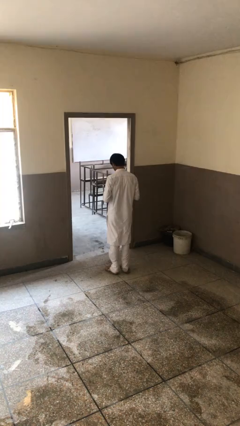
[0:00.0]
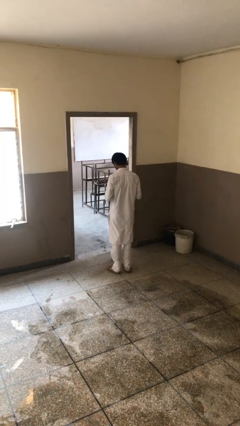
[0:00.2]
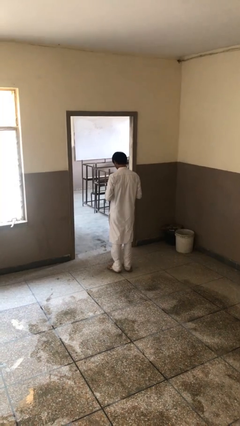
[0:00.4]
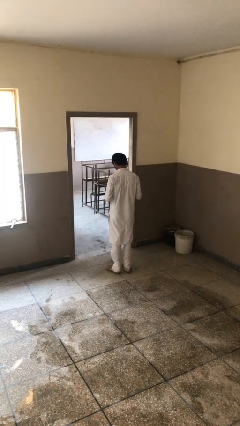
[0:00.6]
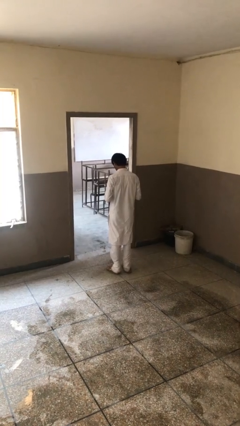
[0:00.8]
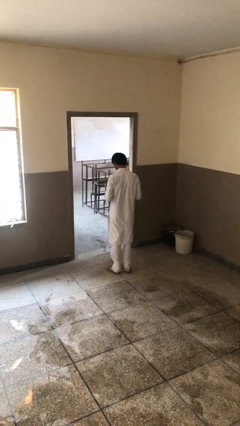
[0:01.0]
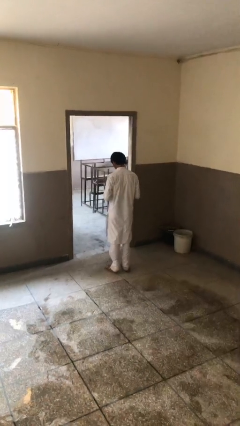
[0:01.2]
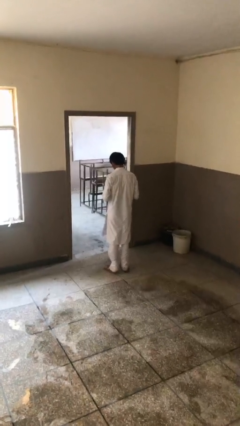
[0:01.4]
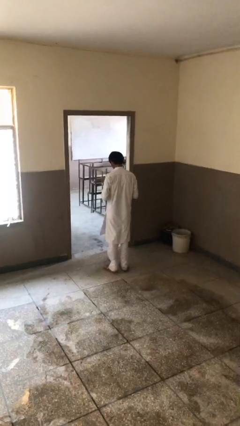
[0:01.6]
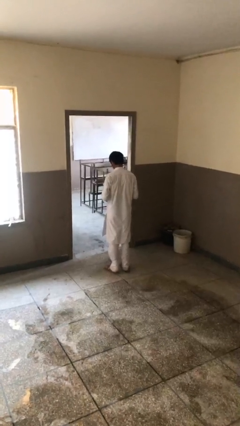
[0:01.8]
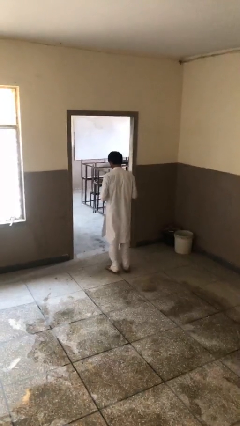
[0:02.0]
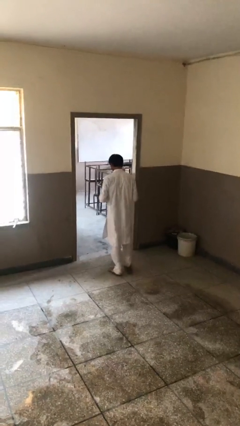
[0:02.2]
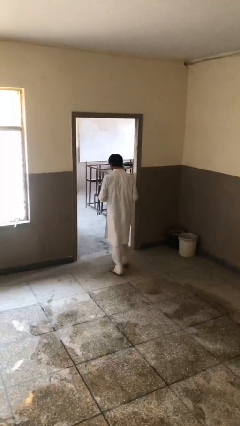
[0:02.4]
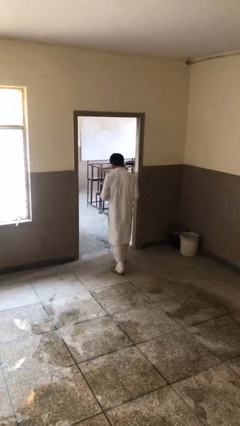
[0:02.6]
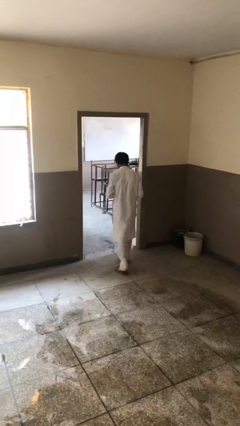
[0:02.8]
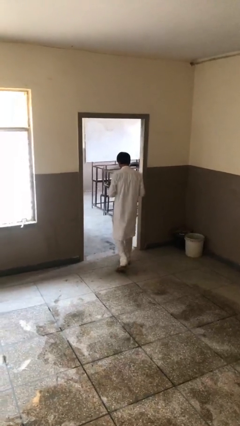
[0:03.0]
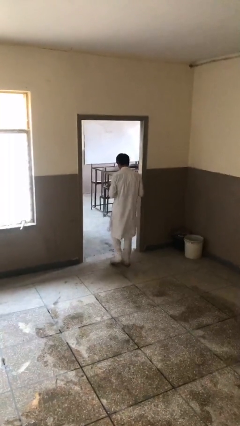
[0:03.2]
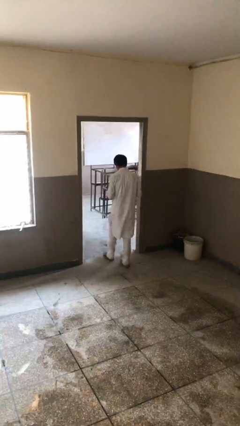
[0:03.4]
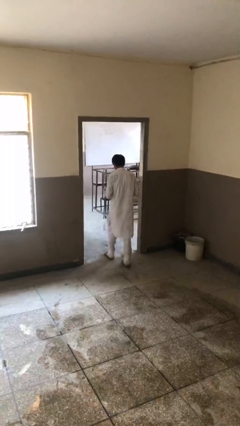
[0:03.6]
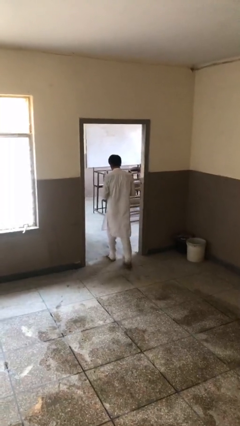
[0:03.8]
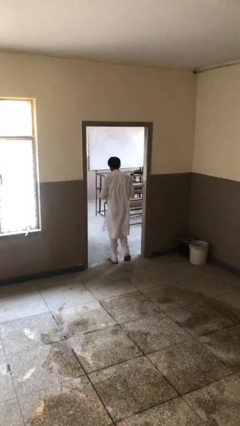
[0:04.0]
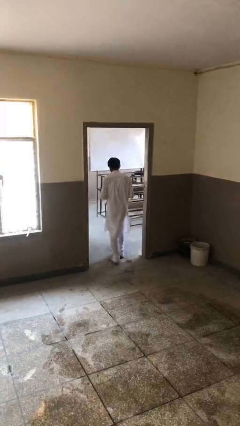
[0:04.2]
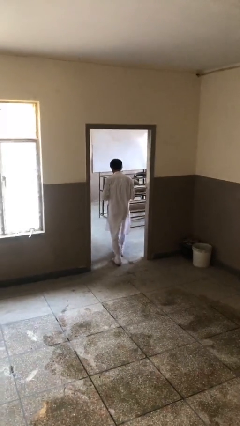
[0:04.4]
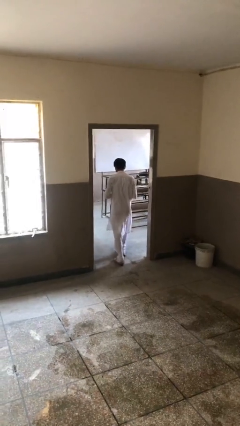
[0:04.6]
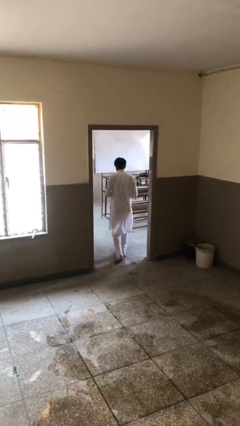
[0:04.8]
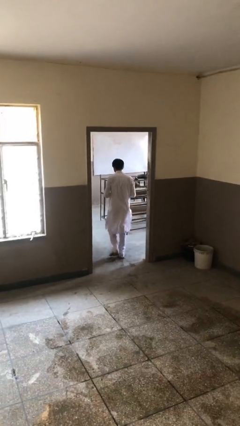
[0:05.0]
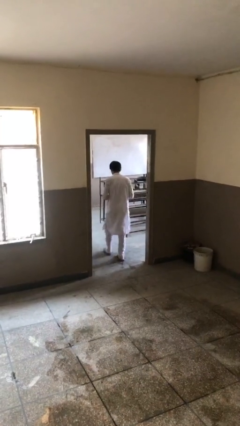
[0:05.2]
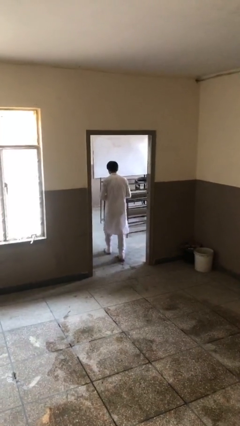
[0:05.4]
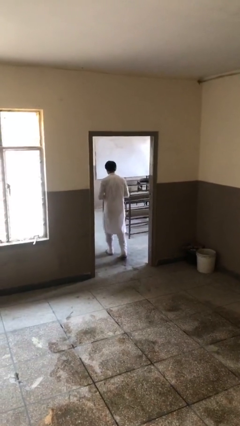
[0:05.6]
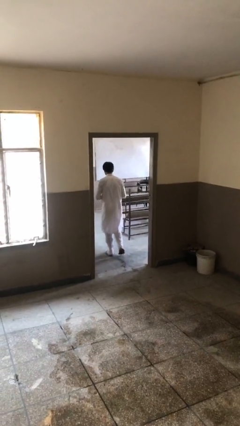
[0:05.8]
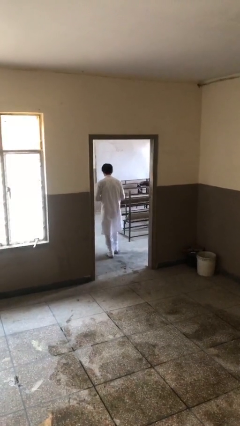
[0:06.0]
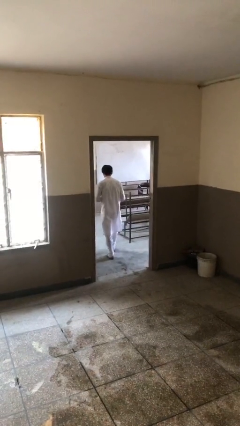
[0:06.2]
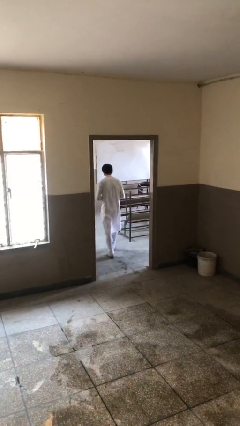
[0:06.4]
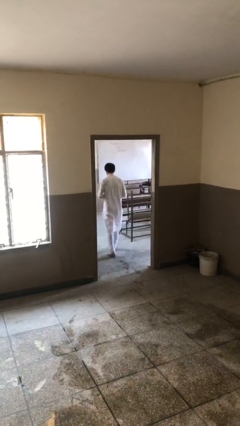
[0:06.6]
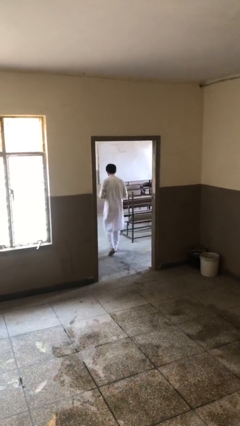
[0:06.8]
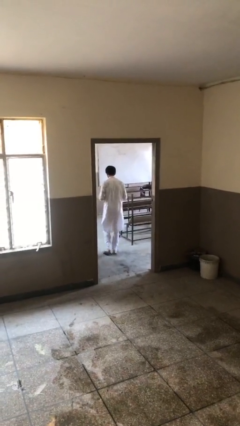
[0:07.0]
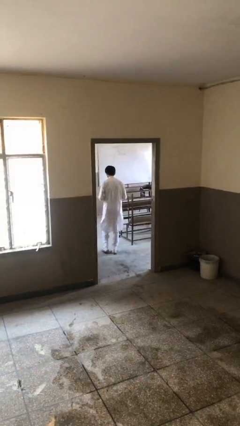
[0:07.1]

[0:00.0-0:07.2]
person exits scene through structure

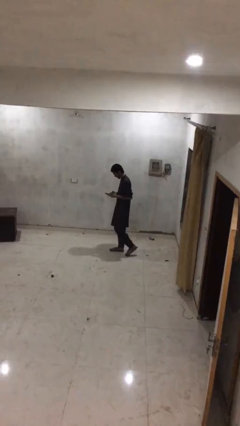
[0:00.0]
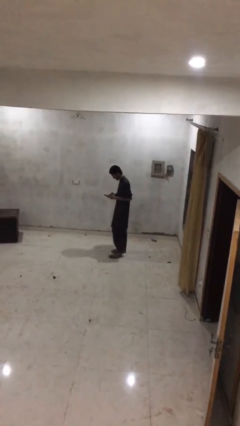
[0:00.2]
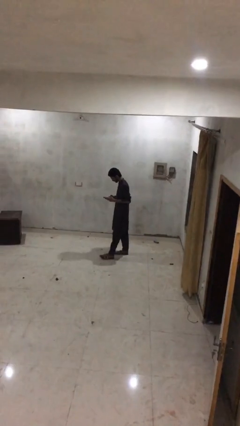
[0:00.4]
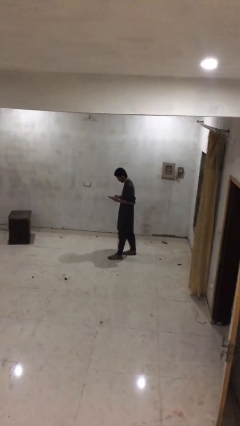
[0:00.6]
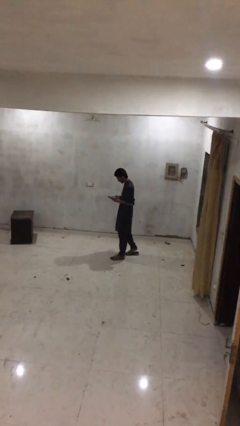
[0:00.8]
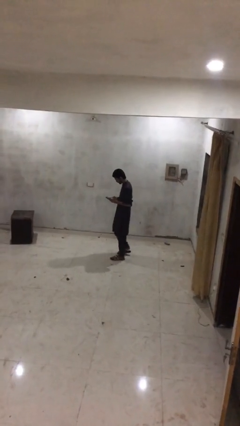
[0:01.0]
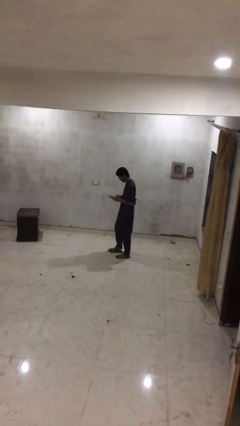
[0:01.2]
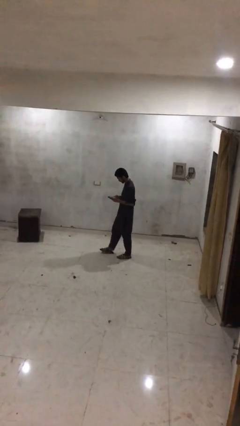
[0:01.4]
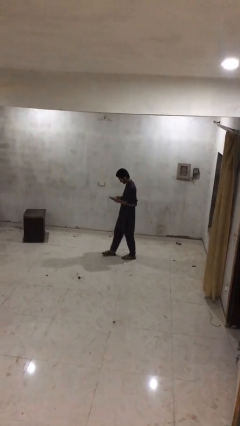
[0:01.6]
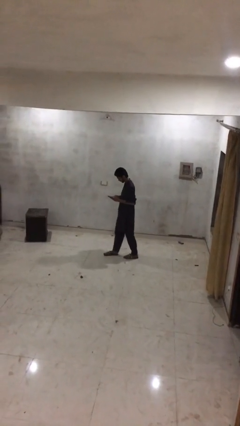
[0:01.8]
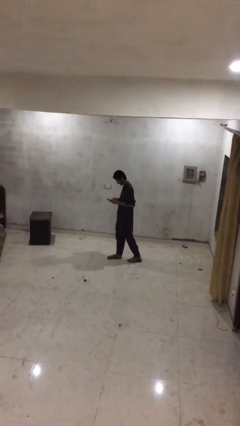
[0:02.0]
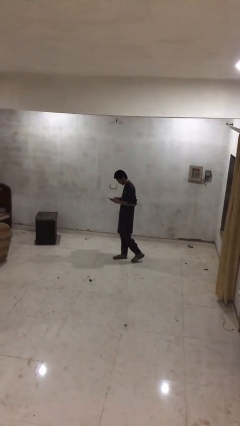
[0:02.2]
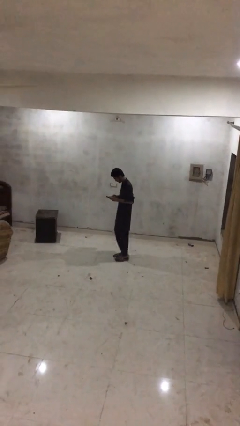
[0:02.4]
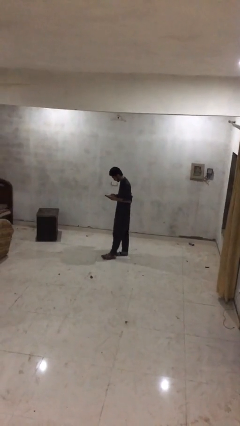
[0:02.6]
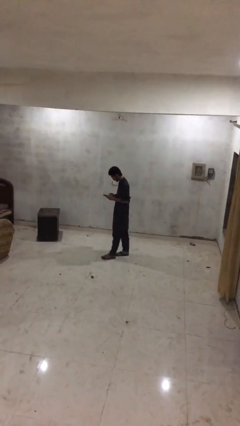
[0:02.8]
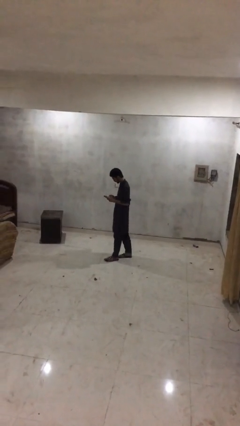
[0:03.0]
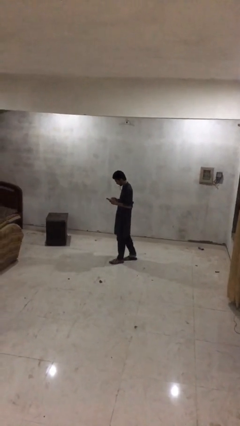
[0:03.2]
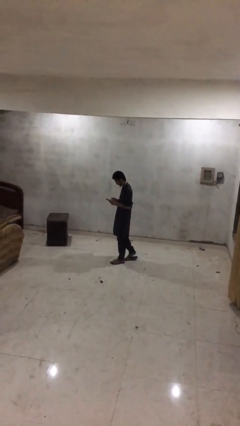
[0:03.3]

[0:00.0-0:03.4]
person texts on phone

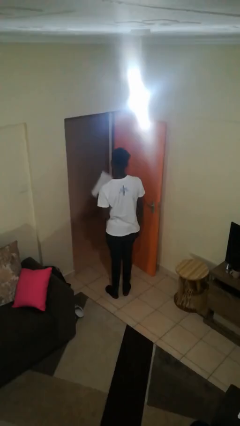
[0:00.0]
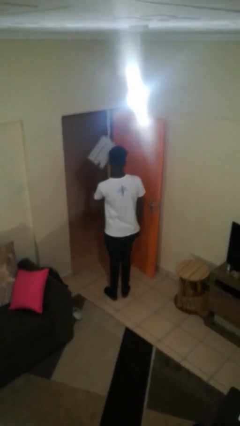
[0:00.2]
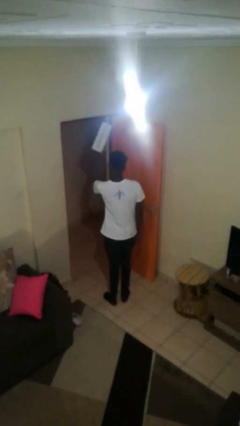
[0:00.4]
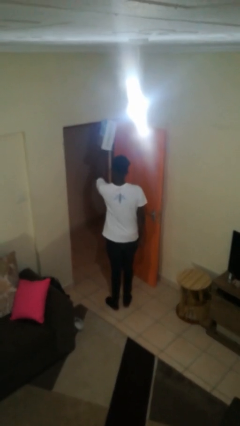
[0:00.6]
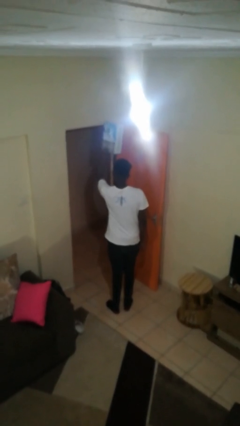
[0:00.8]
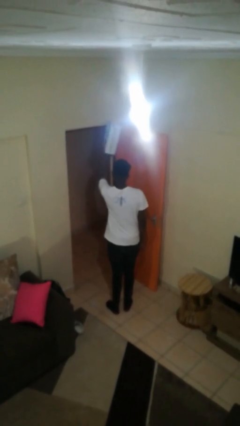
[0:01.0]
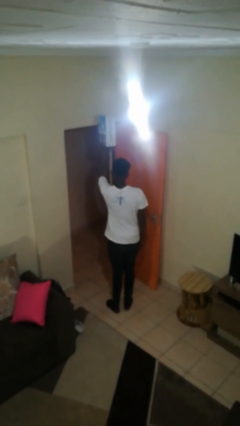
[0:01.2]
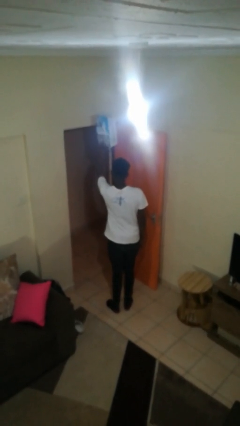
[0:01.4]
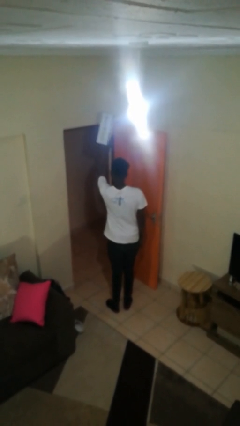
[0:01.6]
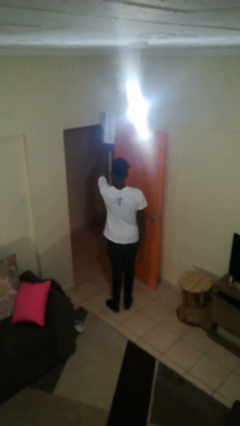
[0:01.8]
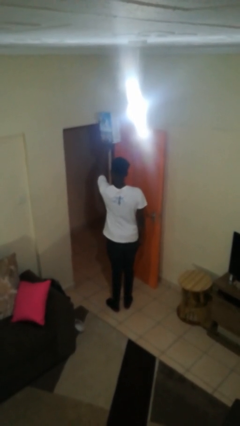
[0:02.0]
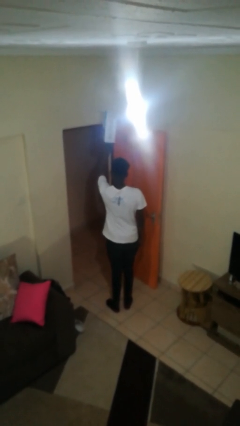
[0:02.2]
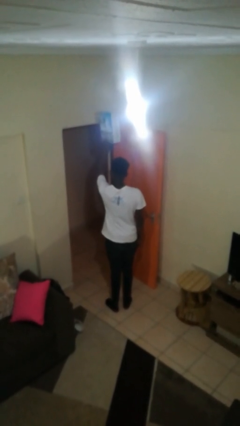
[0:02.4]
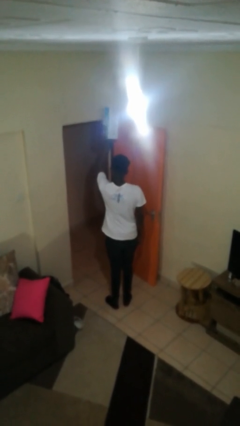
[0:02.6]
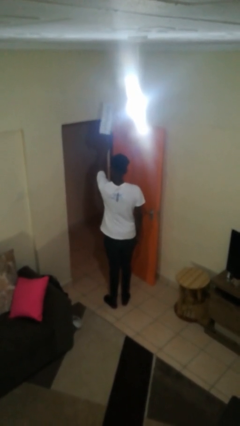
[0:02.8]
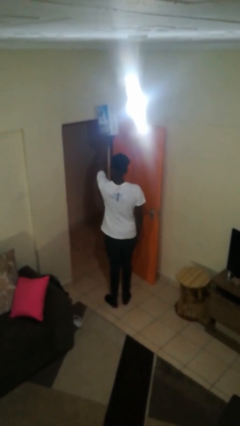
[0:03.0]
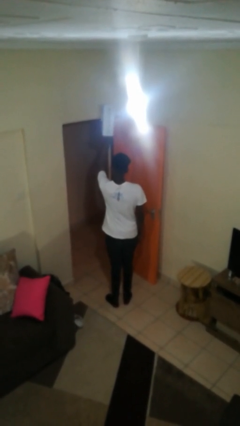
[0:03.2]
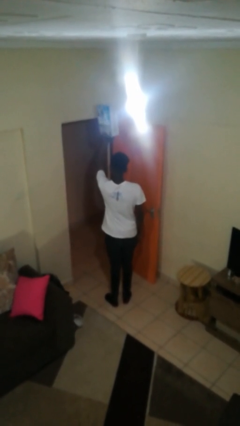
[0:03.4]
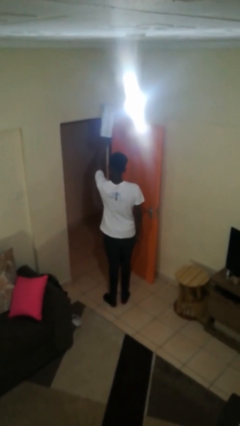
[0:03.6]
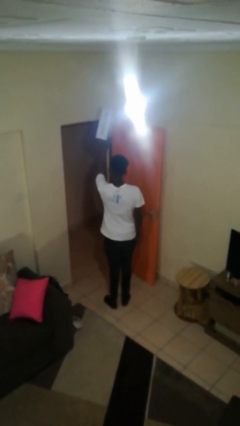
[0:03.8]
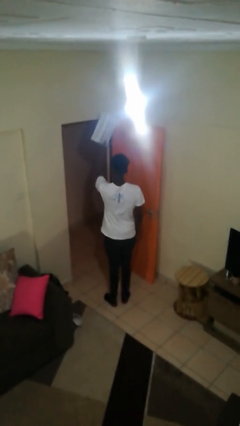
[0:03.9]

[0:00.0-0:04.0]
person holds object above head

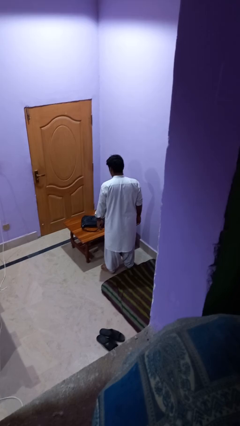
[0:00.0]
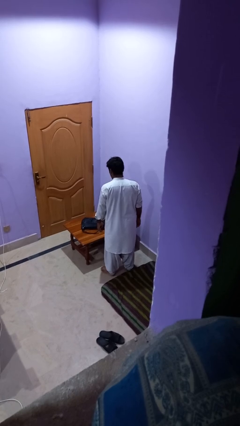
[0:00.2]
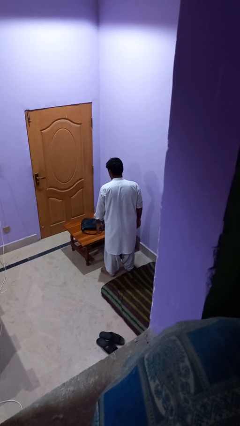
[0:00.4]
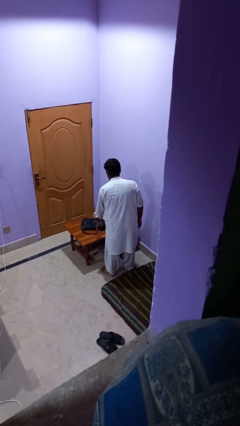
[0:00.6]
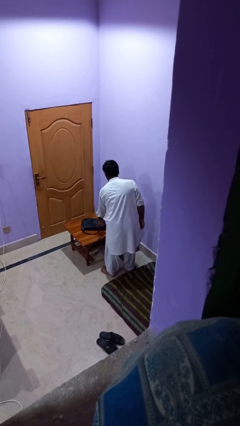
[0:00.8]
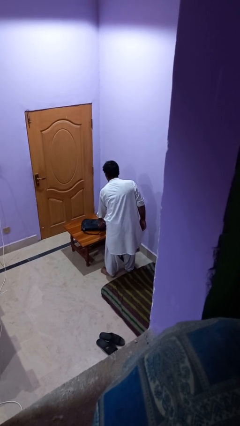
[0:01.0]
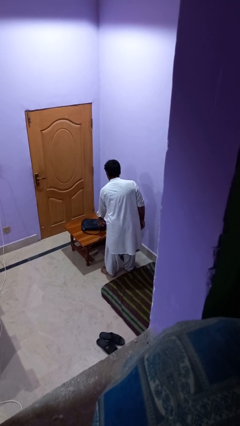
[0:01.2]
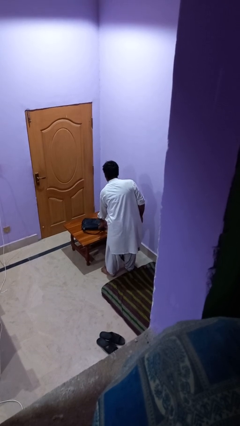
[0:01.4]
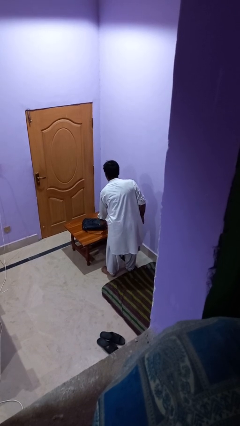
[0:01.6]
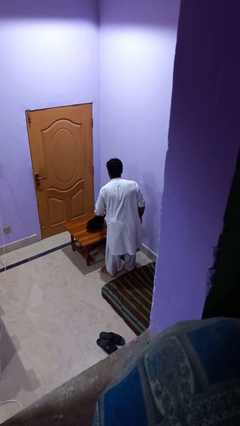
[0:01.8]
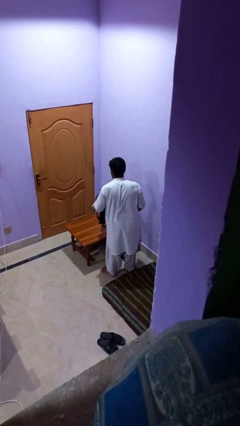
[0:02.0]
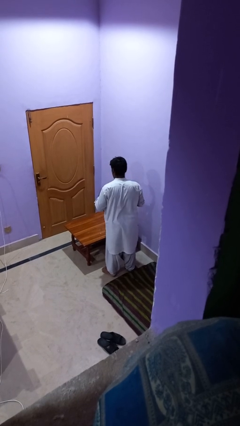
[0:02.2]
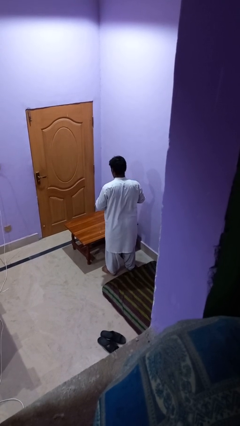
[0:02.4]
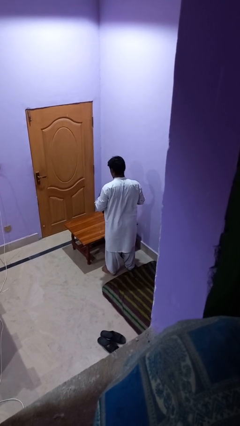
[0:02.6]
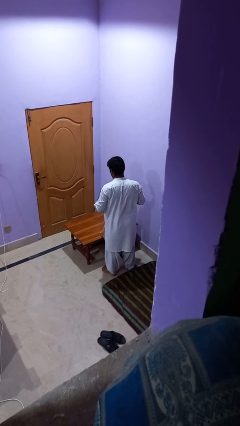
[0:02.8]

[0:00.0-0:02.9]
person picks up object from table

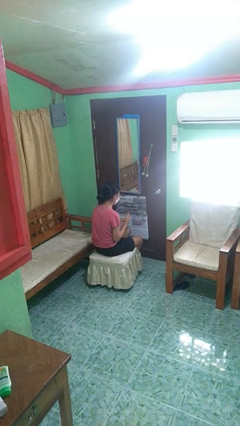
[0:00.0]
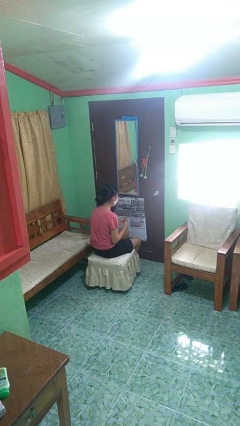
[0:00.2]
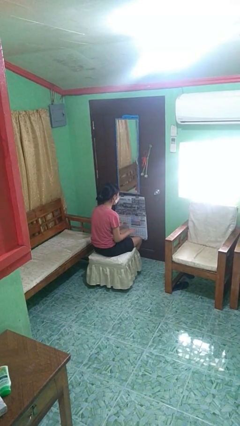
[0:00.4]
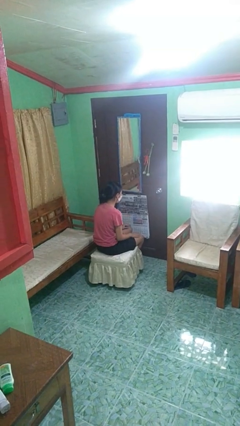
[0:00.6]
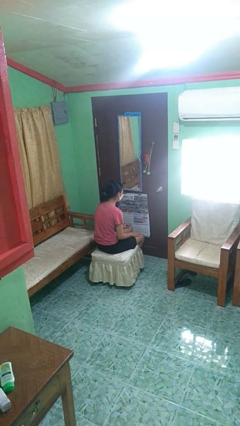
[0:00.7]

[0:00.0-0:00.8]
person takes off ring
